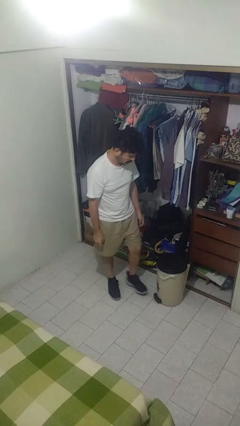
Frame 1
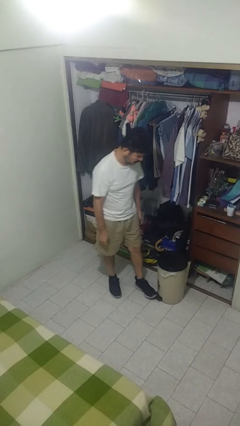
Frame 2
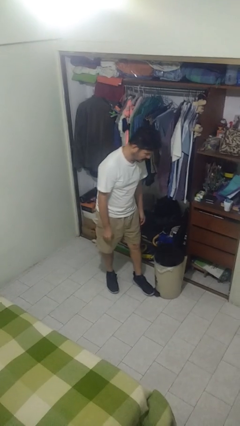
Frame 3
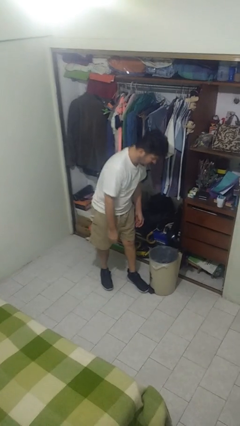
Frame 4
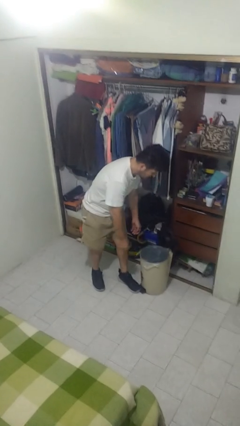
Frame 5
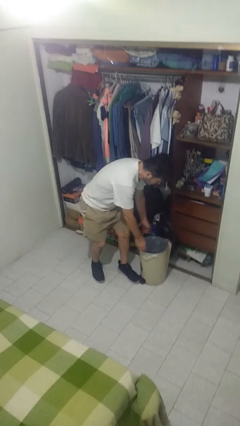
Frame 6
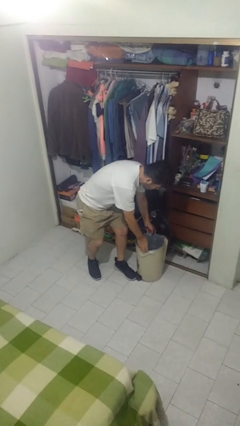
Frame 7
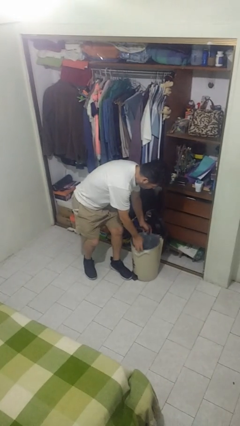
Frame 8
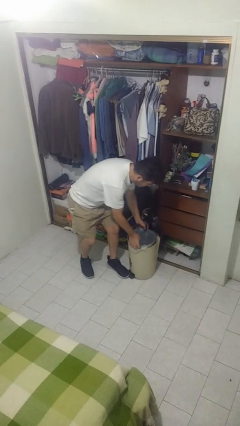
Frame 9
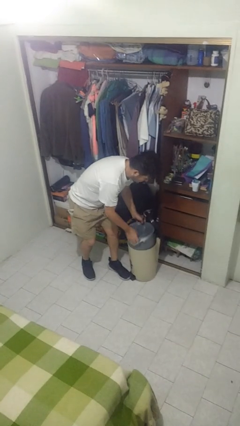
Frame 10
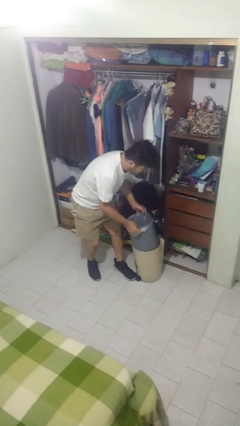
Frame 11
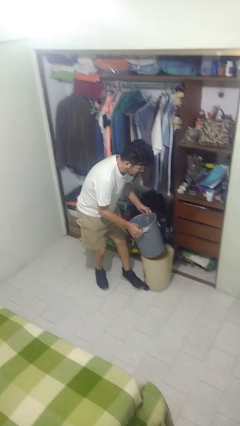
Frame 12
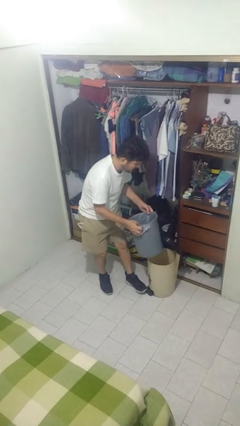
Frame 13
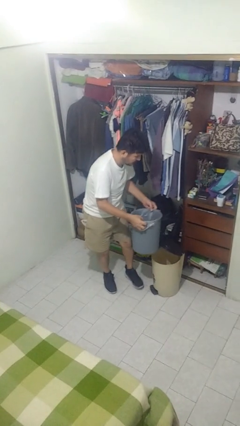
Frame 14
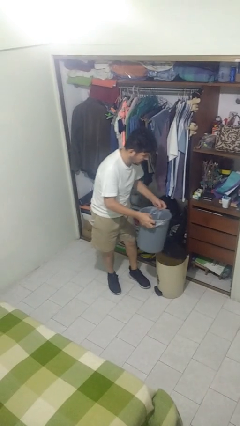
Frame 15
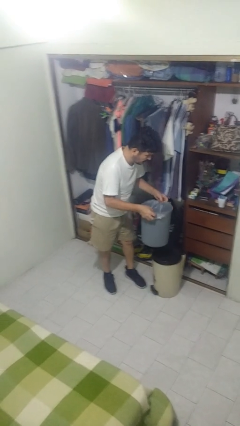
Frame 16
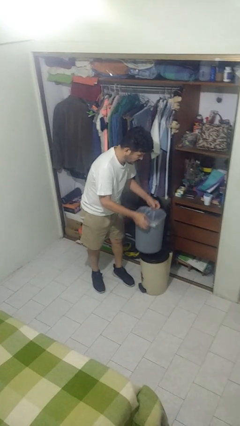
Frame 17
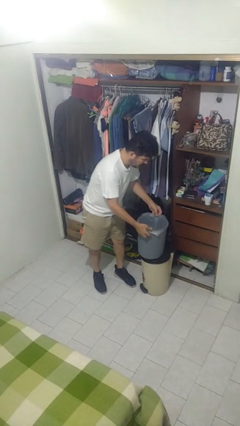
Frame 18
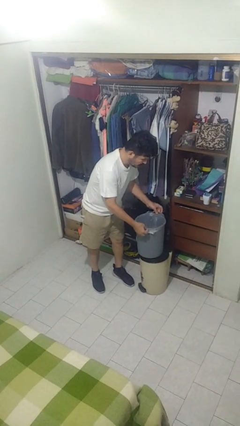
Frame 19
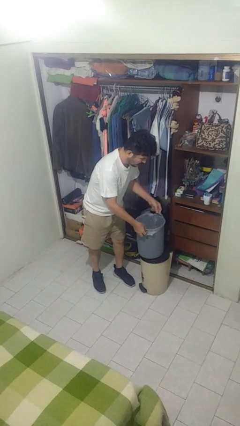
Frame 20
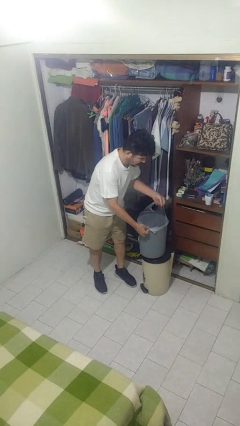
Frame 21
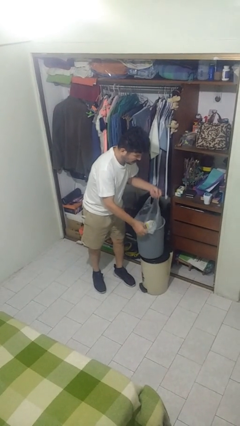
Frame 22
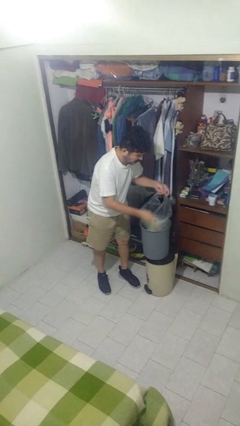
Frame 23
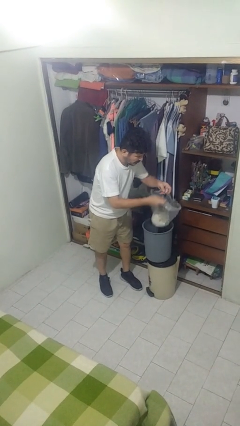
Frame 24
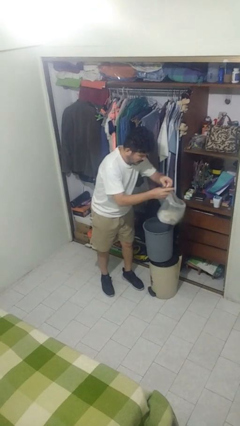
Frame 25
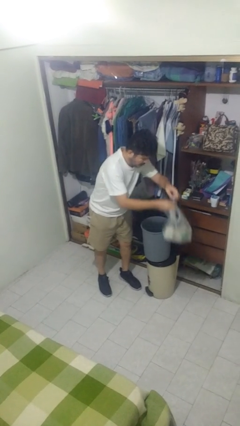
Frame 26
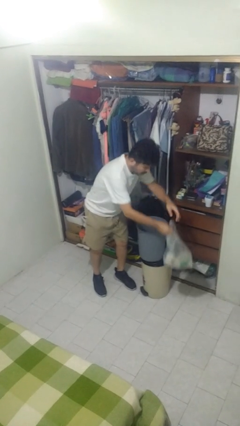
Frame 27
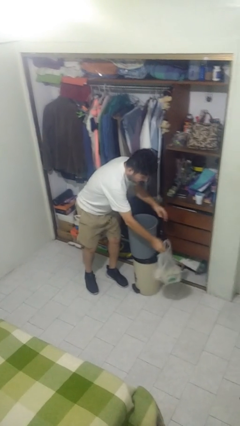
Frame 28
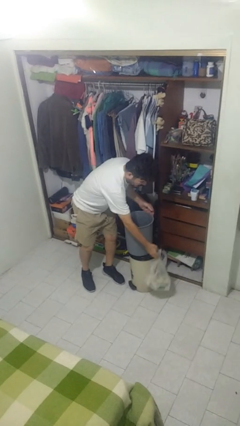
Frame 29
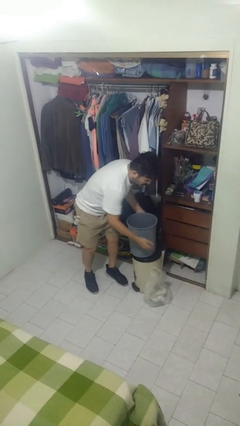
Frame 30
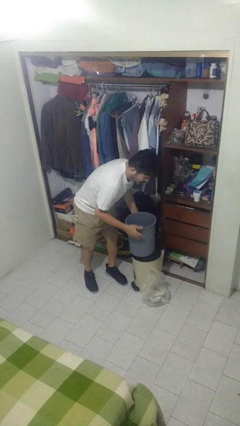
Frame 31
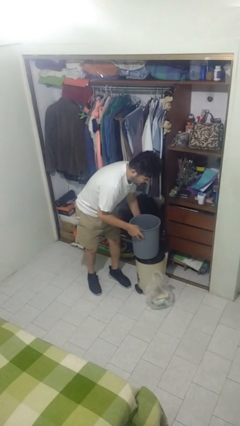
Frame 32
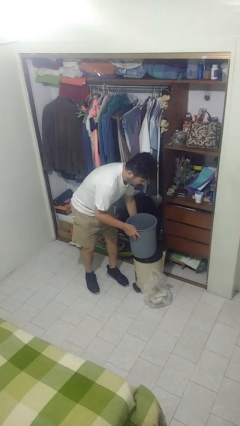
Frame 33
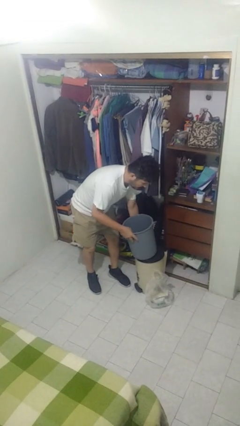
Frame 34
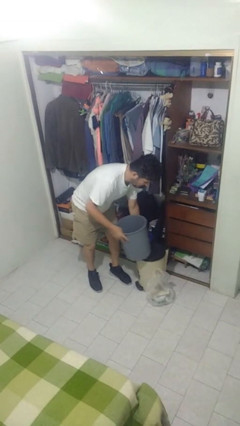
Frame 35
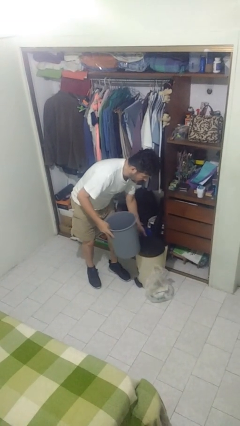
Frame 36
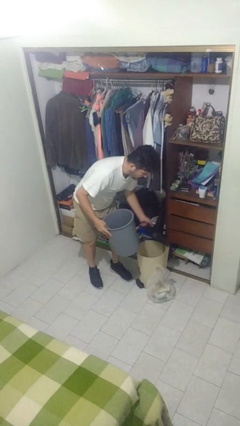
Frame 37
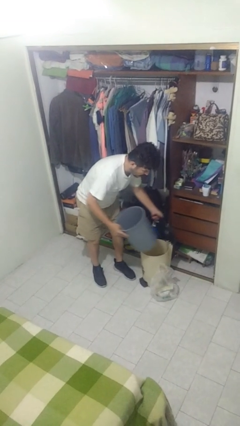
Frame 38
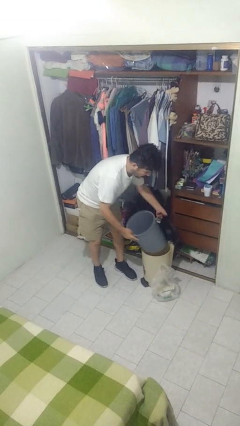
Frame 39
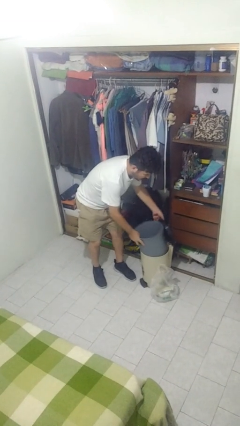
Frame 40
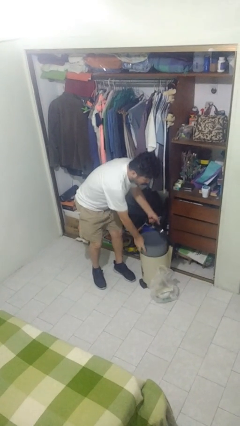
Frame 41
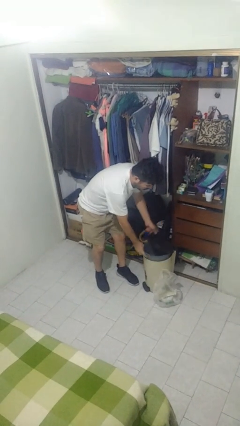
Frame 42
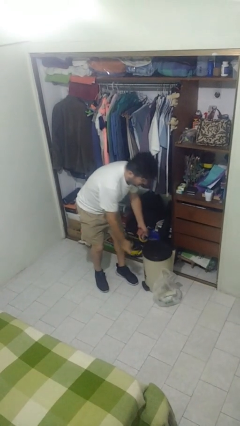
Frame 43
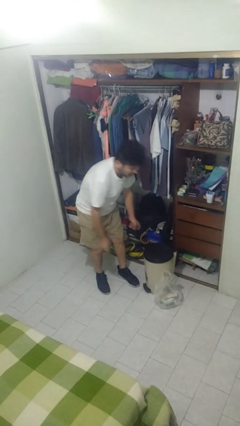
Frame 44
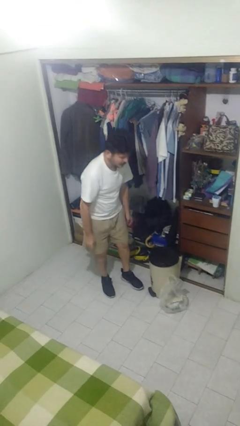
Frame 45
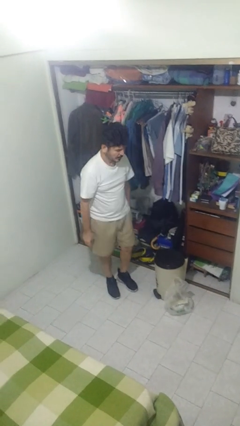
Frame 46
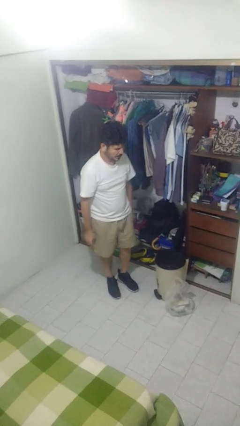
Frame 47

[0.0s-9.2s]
person removes trashbag from trashcan

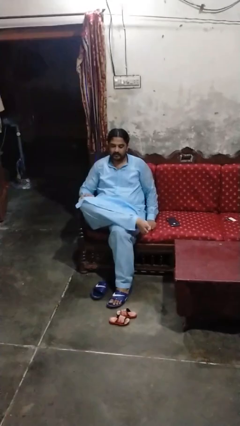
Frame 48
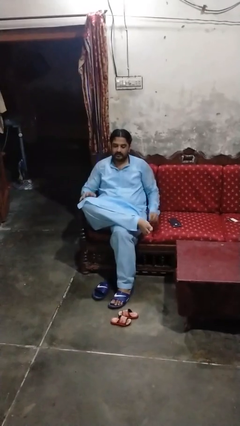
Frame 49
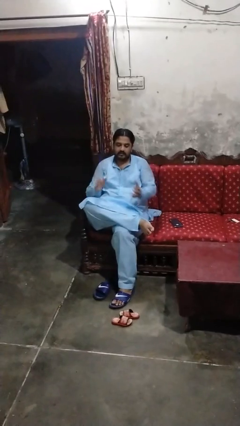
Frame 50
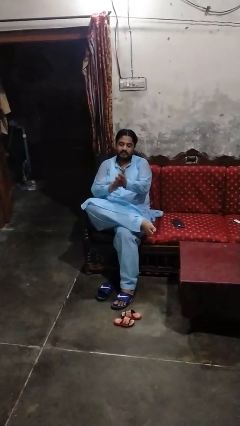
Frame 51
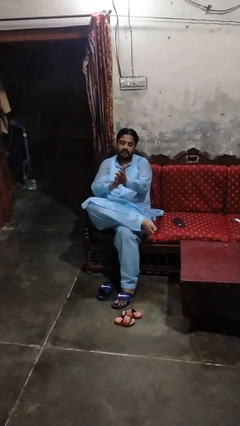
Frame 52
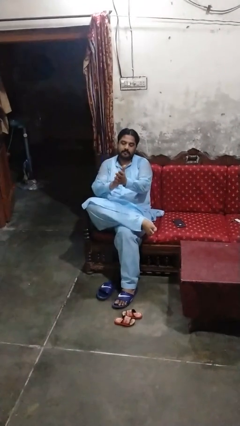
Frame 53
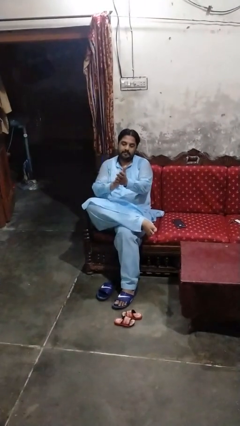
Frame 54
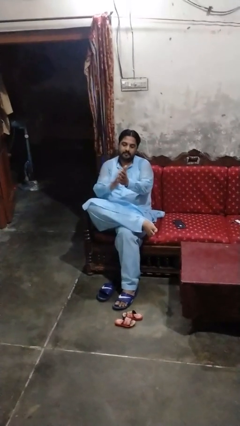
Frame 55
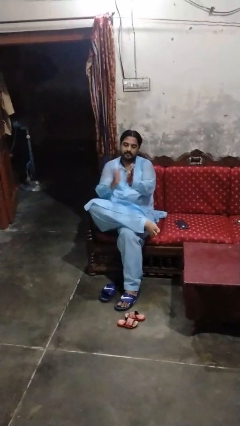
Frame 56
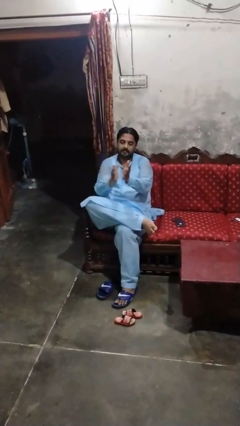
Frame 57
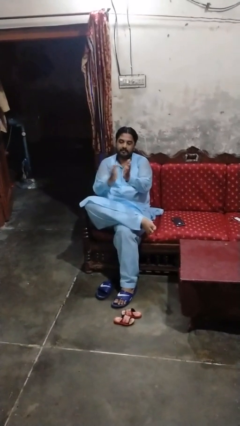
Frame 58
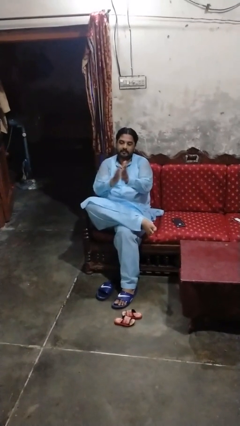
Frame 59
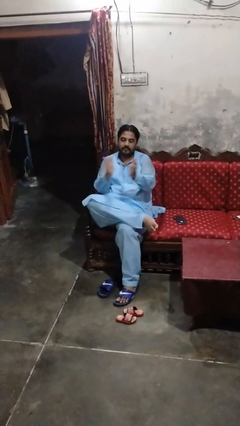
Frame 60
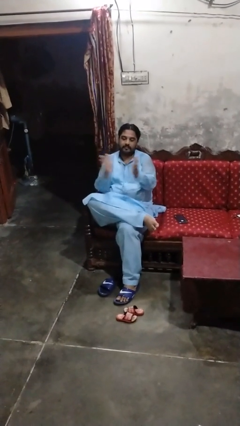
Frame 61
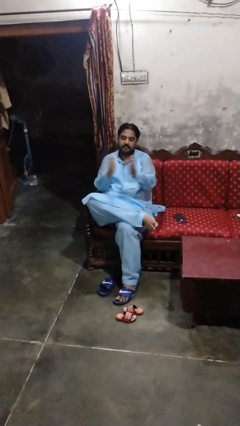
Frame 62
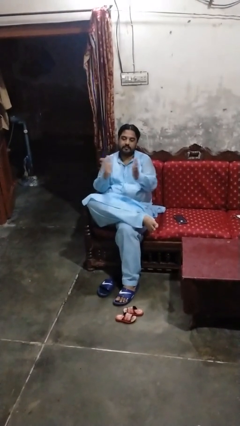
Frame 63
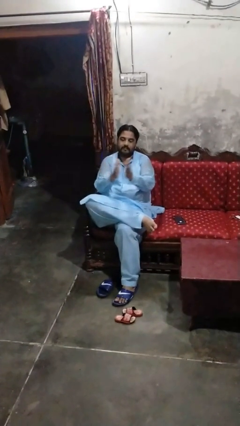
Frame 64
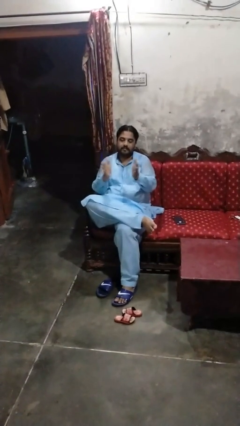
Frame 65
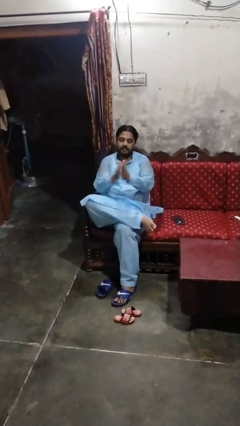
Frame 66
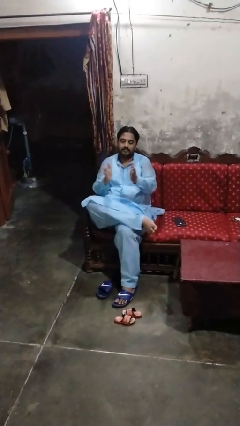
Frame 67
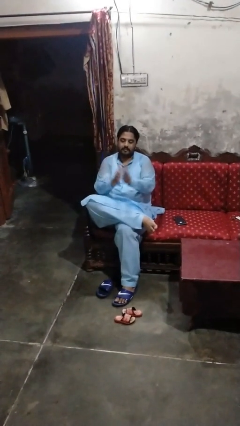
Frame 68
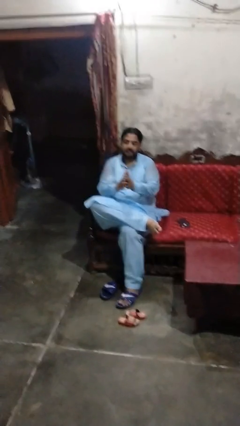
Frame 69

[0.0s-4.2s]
person claps hands

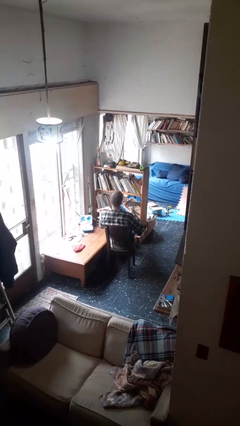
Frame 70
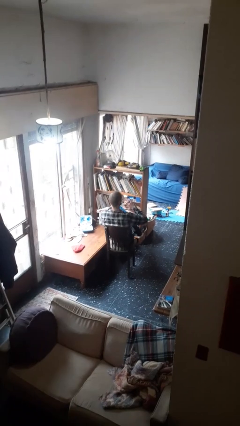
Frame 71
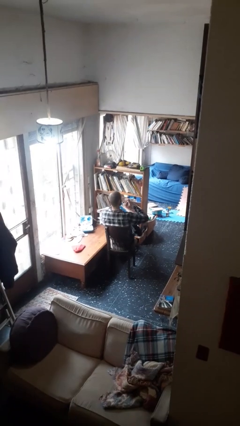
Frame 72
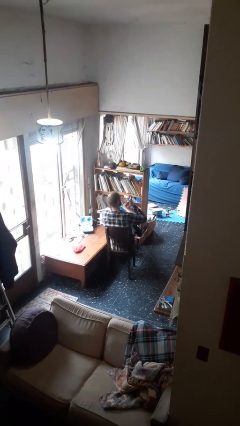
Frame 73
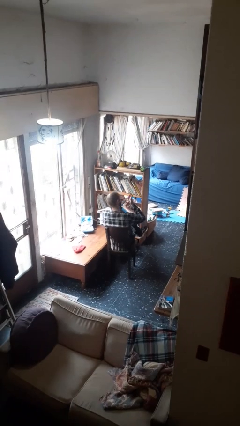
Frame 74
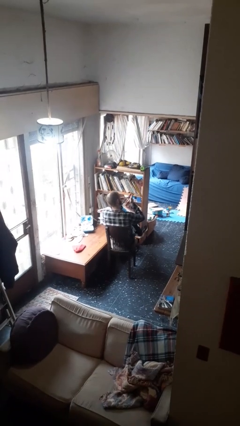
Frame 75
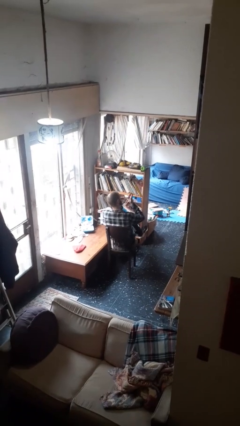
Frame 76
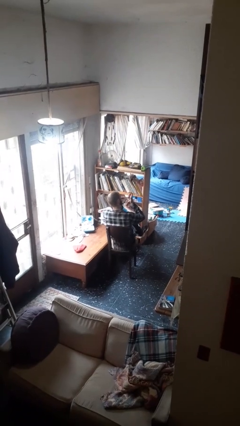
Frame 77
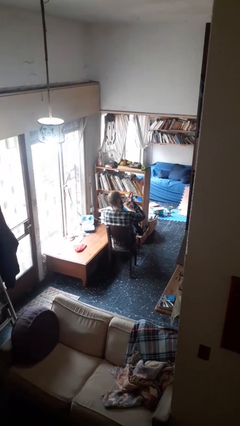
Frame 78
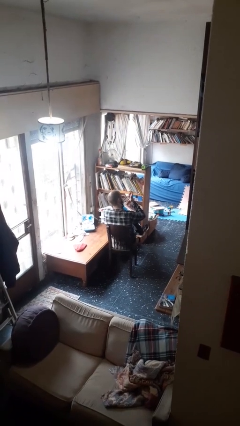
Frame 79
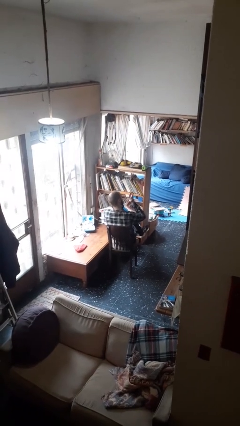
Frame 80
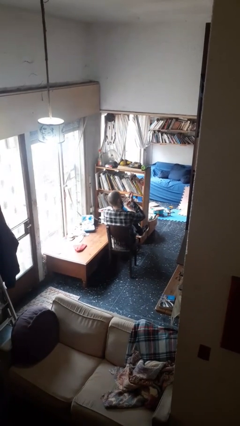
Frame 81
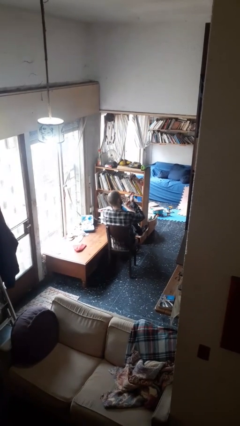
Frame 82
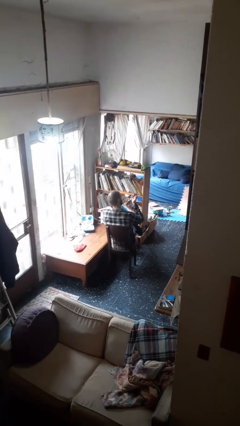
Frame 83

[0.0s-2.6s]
person clips fingernails

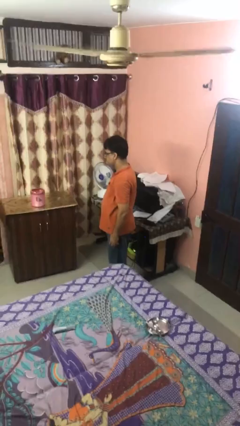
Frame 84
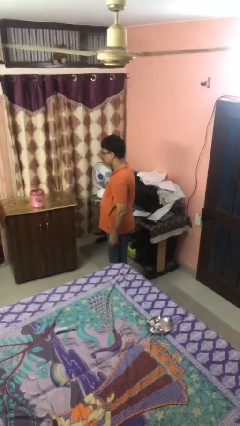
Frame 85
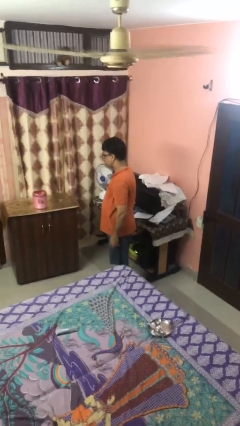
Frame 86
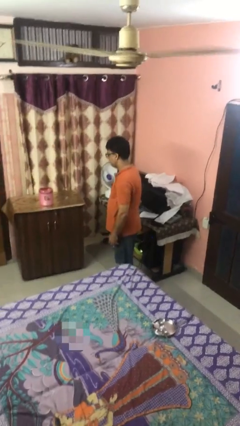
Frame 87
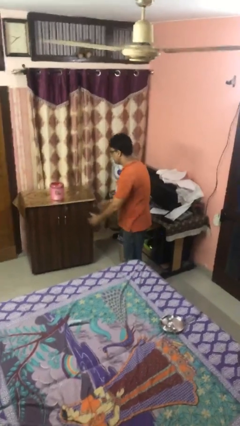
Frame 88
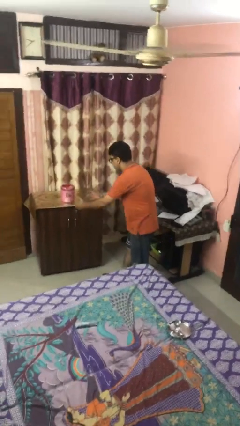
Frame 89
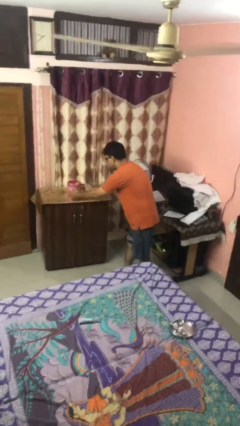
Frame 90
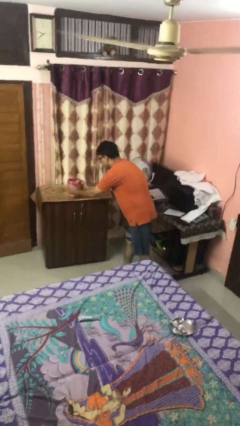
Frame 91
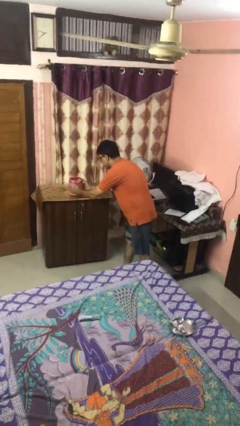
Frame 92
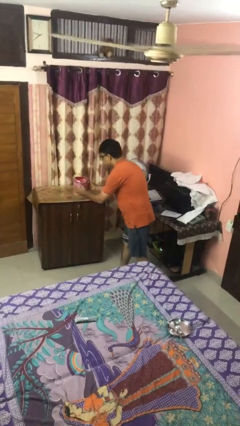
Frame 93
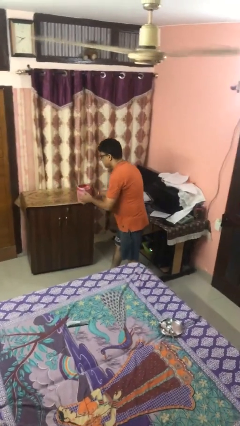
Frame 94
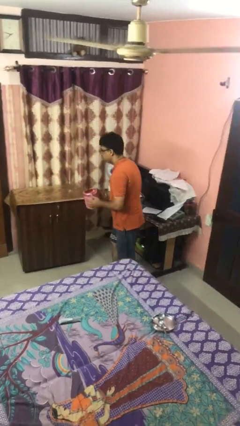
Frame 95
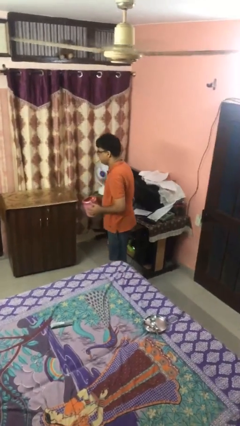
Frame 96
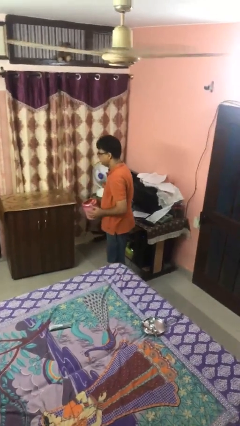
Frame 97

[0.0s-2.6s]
person picks up object from countertop
